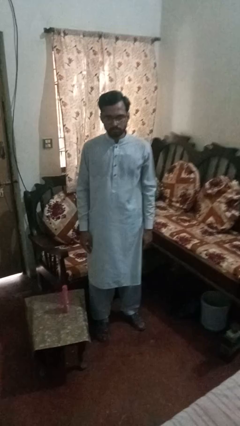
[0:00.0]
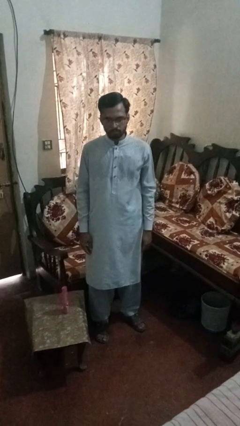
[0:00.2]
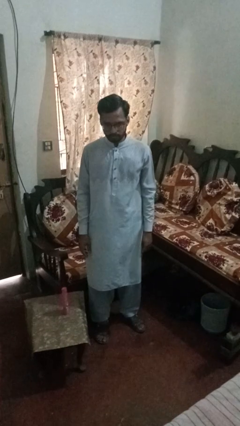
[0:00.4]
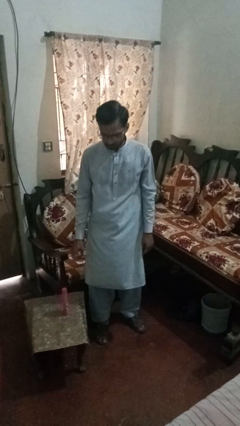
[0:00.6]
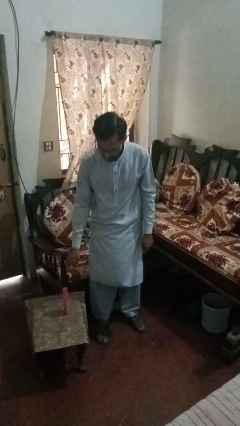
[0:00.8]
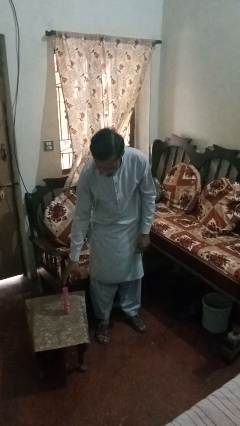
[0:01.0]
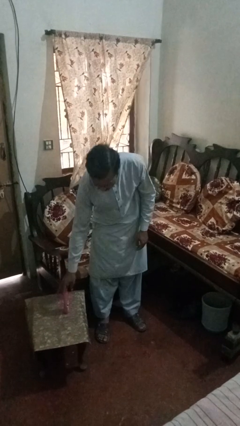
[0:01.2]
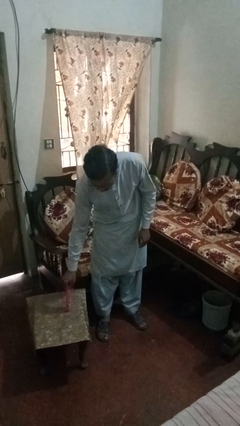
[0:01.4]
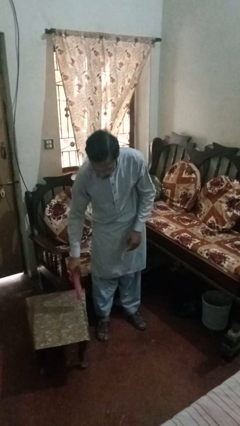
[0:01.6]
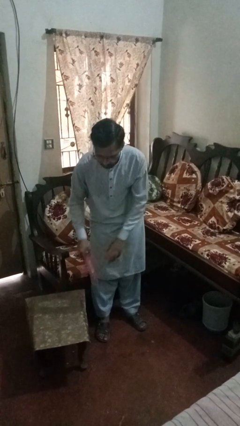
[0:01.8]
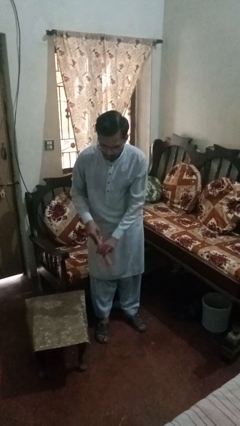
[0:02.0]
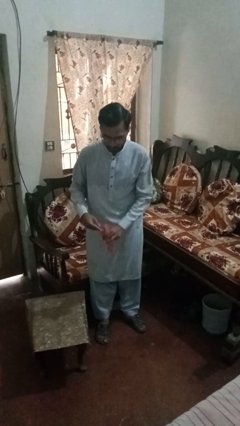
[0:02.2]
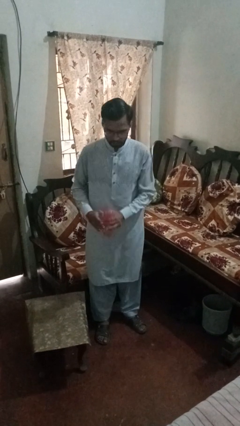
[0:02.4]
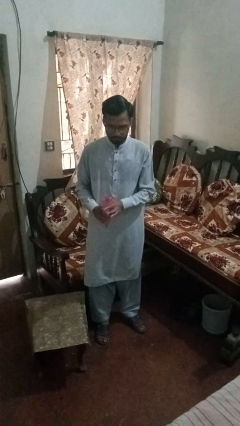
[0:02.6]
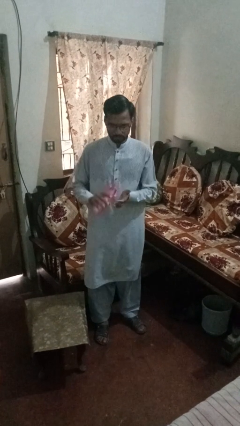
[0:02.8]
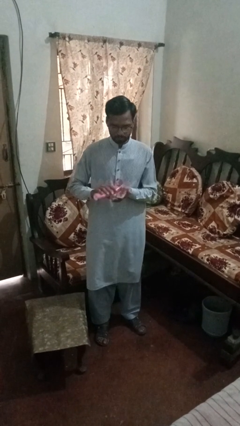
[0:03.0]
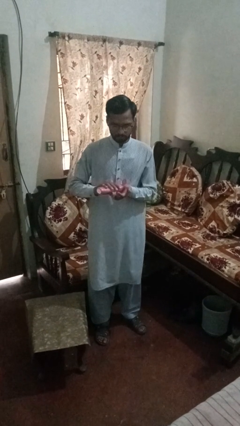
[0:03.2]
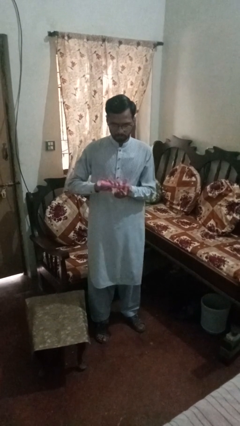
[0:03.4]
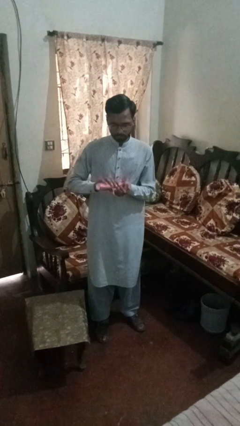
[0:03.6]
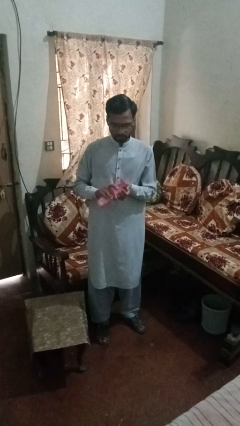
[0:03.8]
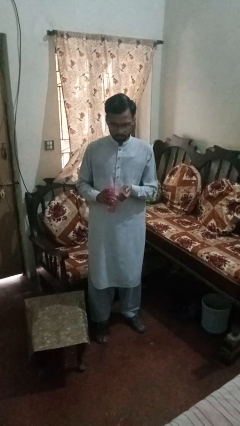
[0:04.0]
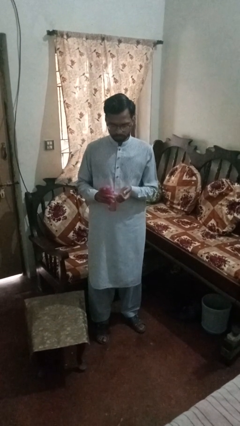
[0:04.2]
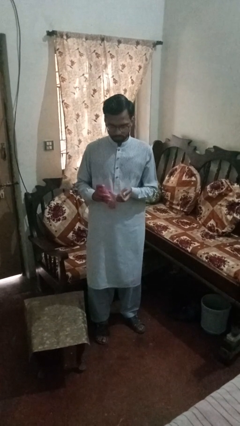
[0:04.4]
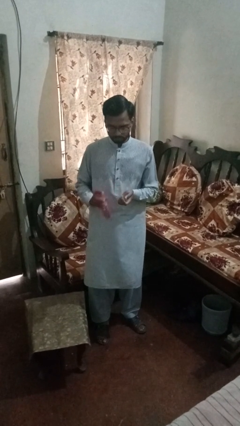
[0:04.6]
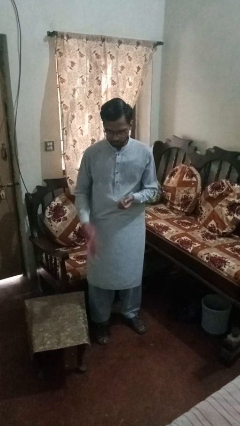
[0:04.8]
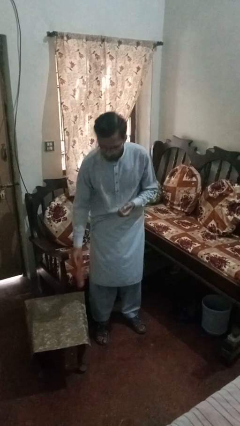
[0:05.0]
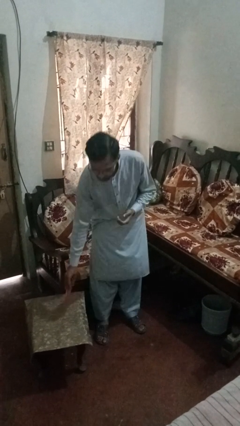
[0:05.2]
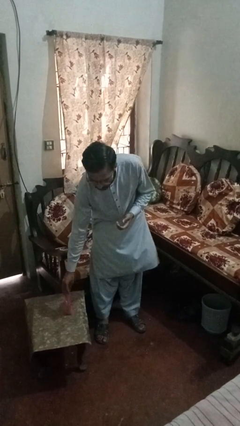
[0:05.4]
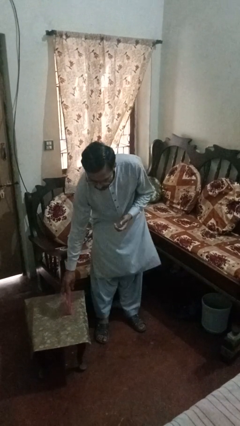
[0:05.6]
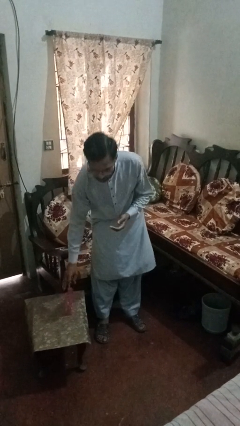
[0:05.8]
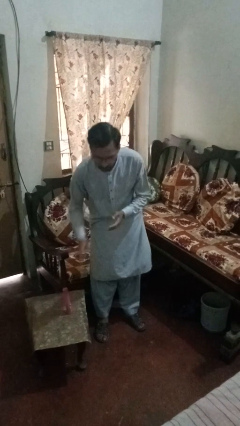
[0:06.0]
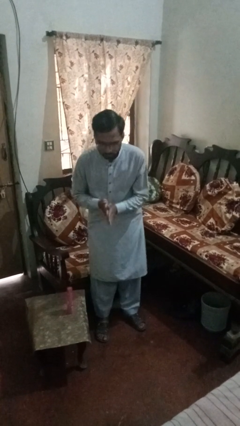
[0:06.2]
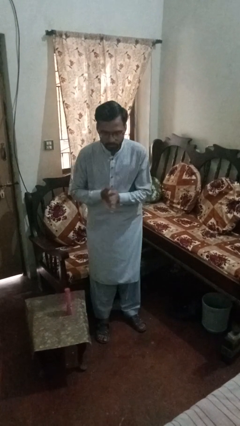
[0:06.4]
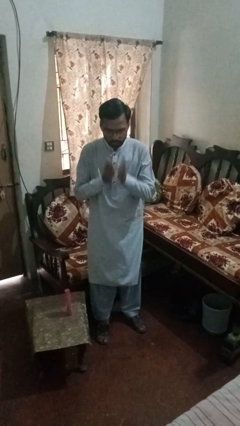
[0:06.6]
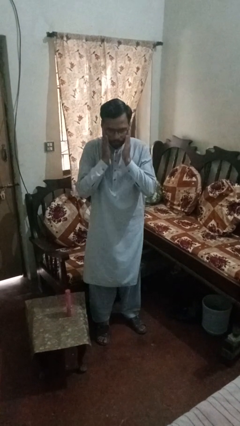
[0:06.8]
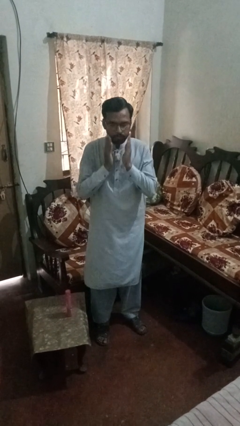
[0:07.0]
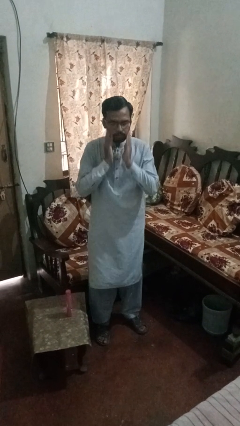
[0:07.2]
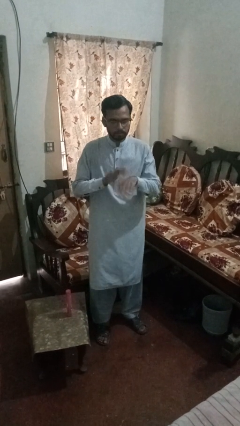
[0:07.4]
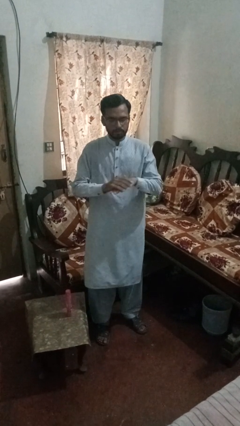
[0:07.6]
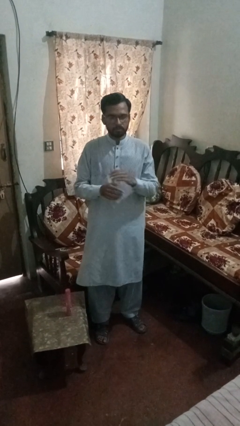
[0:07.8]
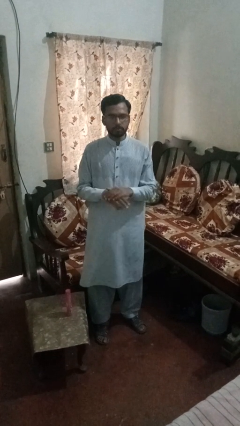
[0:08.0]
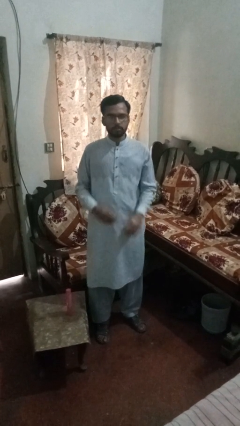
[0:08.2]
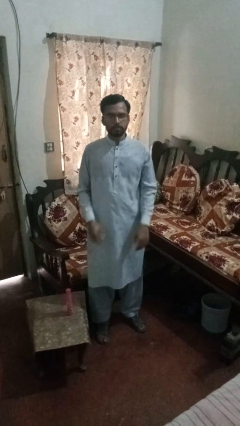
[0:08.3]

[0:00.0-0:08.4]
person applies sunscreen

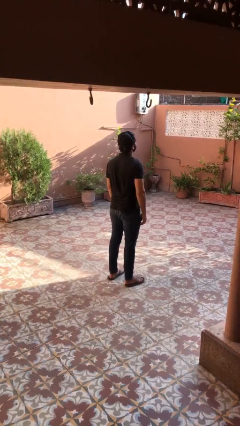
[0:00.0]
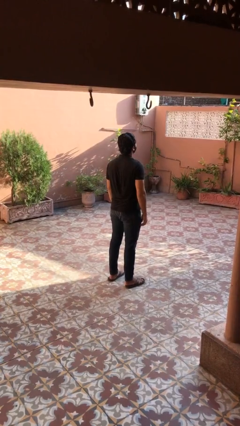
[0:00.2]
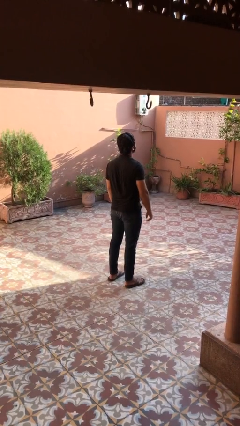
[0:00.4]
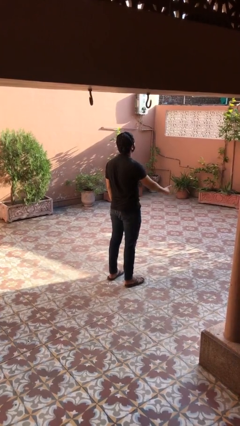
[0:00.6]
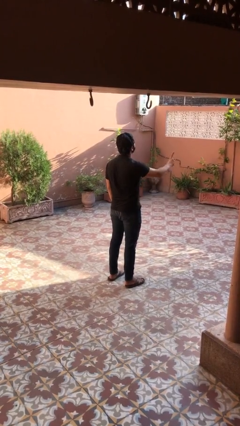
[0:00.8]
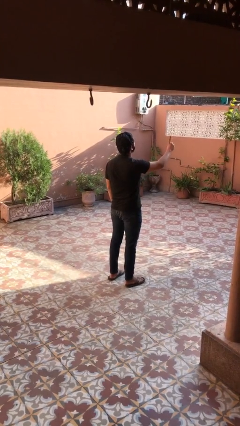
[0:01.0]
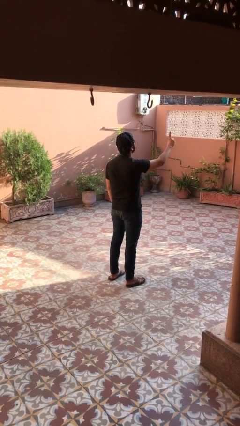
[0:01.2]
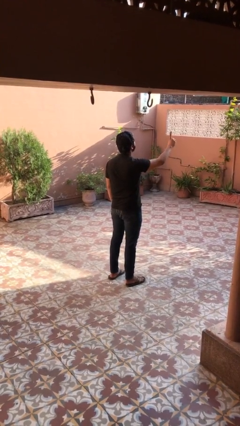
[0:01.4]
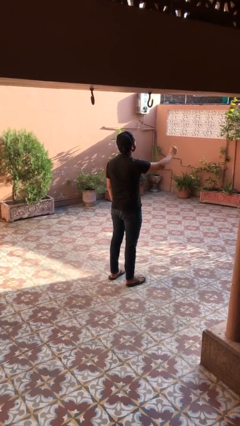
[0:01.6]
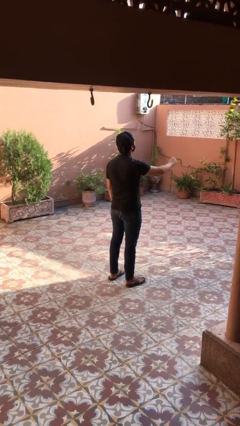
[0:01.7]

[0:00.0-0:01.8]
person gestures number one

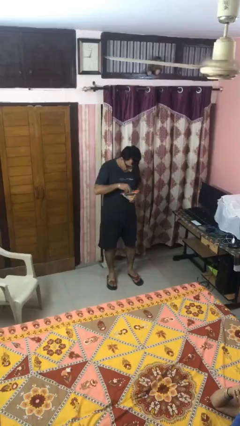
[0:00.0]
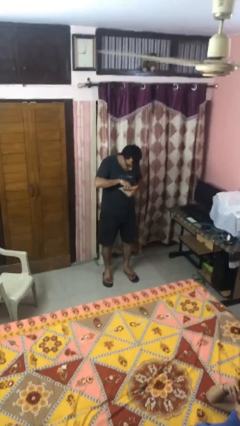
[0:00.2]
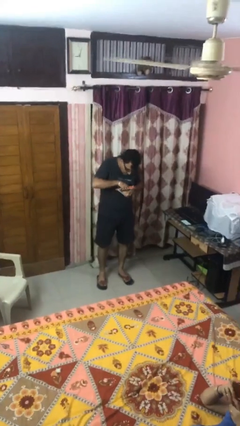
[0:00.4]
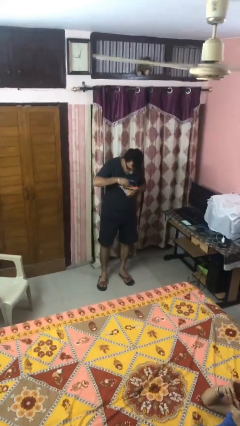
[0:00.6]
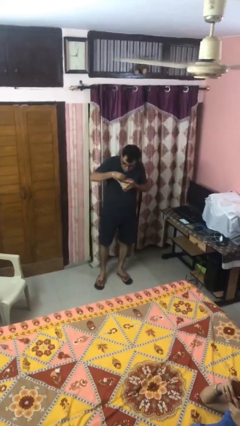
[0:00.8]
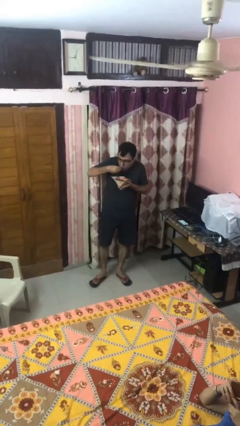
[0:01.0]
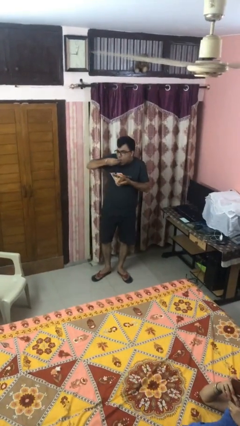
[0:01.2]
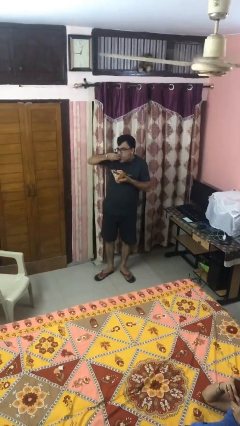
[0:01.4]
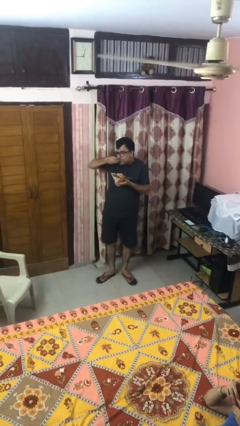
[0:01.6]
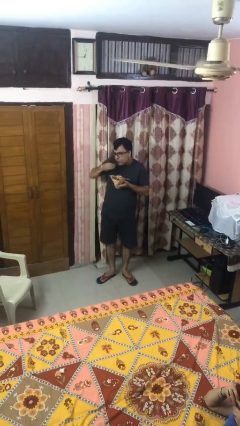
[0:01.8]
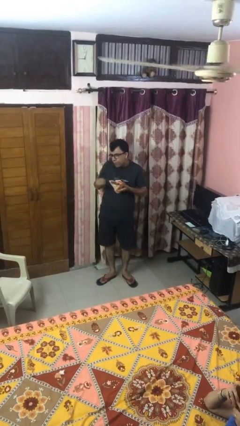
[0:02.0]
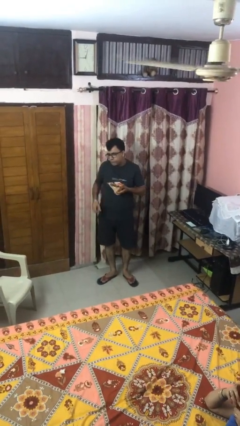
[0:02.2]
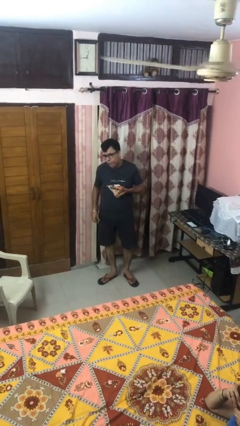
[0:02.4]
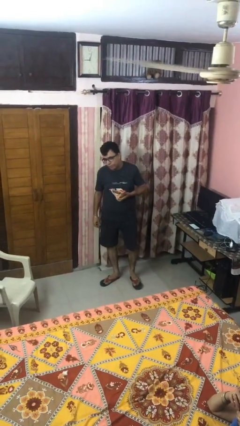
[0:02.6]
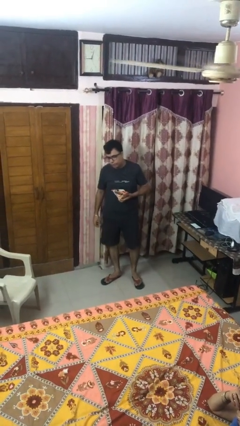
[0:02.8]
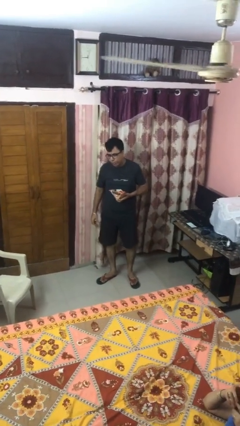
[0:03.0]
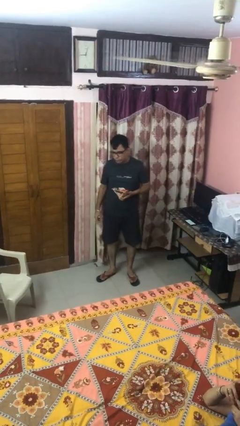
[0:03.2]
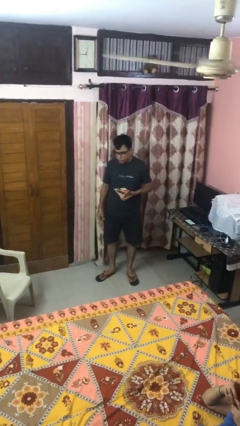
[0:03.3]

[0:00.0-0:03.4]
person eats snack from bag

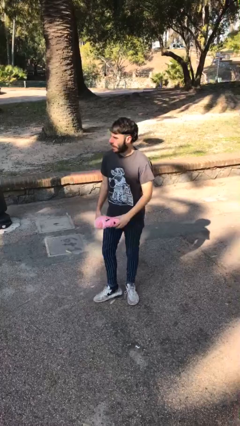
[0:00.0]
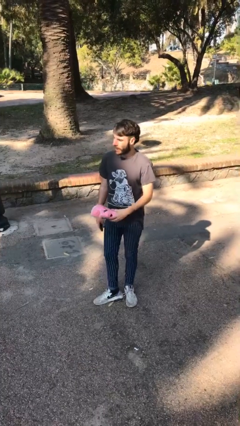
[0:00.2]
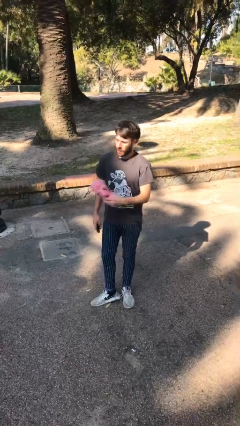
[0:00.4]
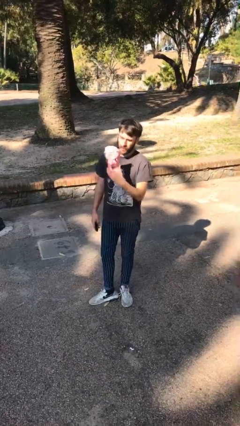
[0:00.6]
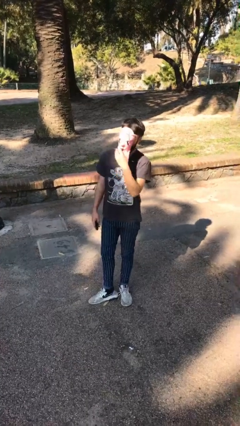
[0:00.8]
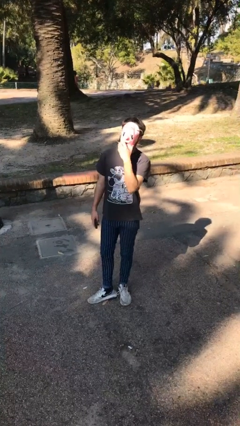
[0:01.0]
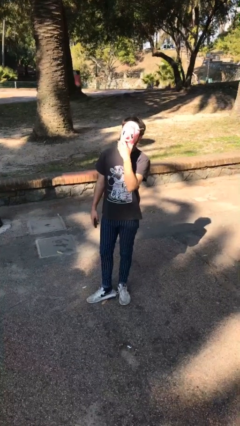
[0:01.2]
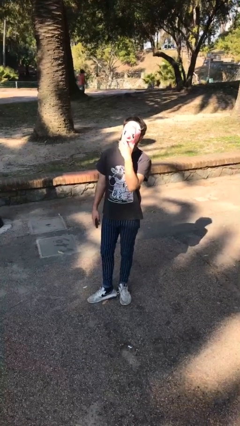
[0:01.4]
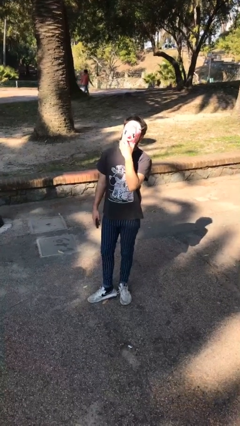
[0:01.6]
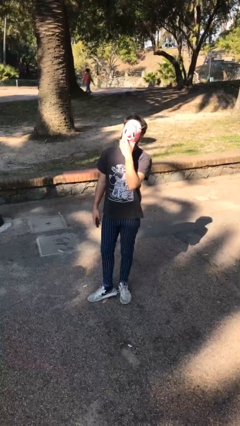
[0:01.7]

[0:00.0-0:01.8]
person puts on facemask

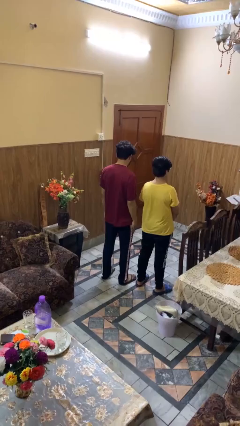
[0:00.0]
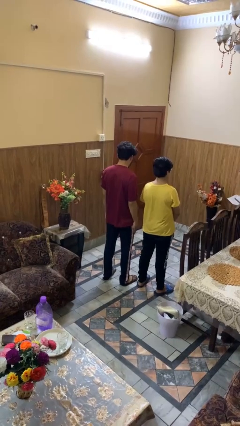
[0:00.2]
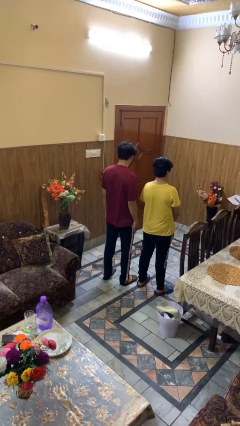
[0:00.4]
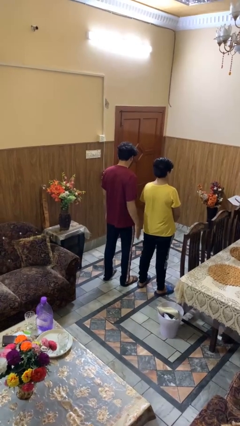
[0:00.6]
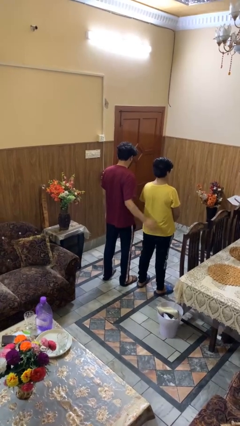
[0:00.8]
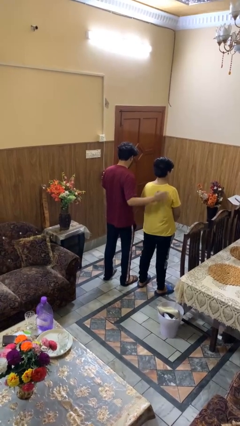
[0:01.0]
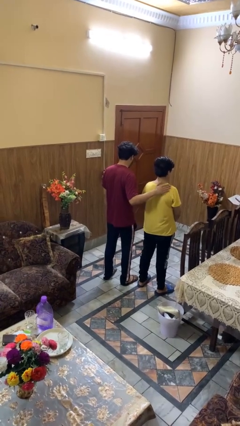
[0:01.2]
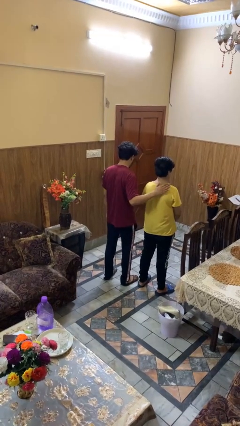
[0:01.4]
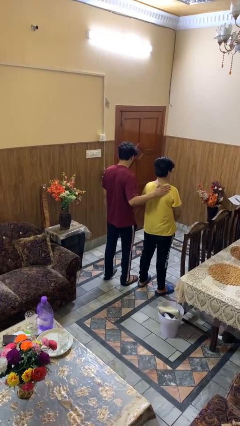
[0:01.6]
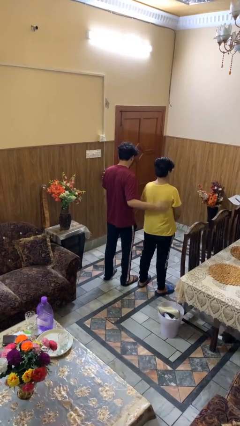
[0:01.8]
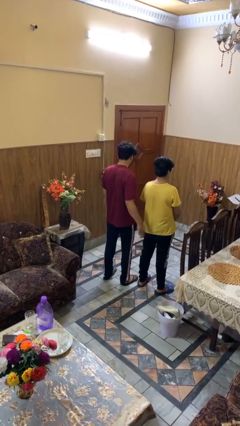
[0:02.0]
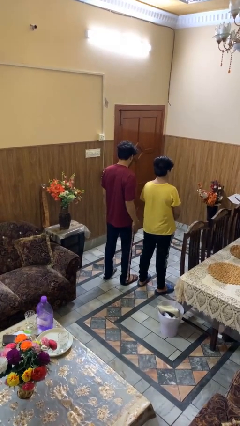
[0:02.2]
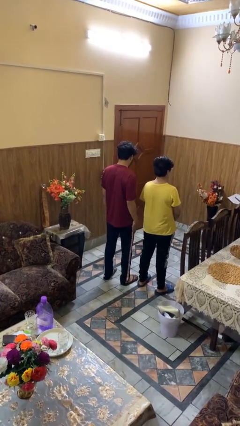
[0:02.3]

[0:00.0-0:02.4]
person touches back of person
